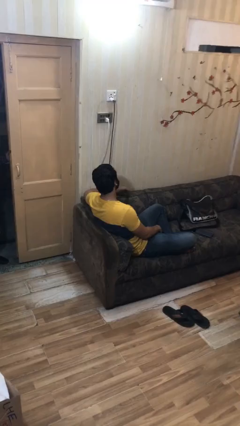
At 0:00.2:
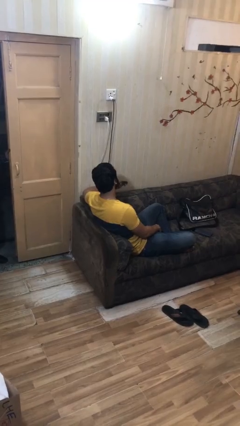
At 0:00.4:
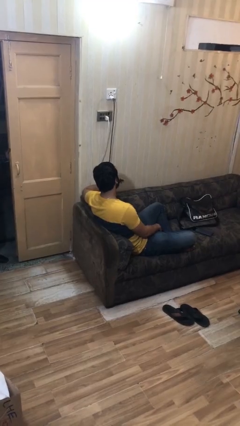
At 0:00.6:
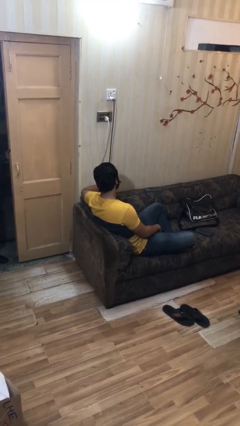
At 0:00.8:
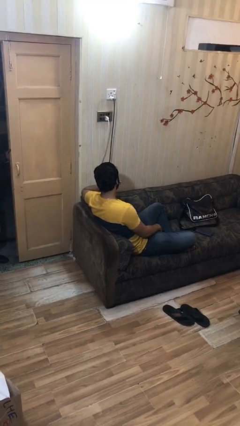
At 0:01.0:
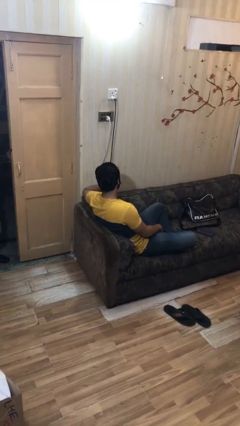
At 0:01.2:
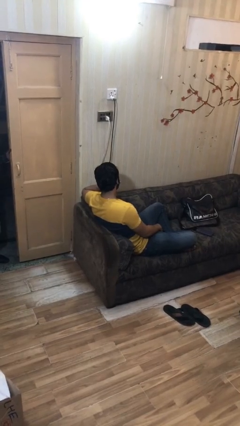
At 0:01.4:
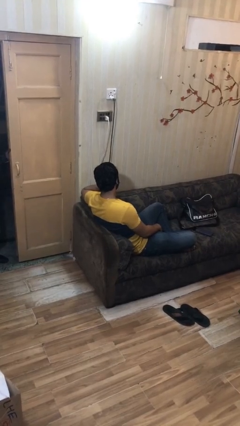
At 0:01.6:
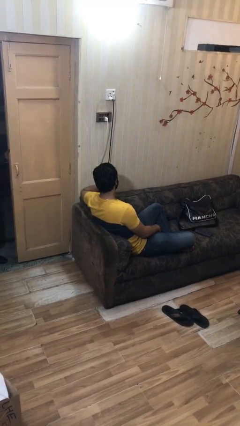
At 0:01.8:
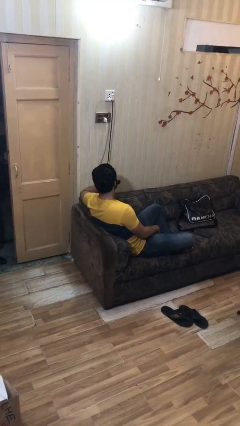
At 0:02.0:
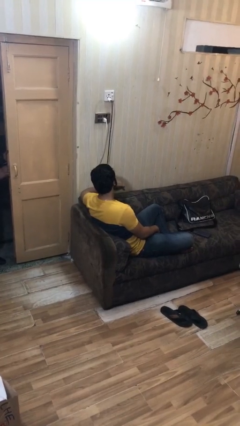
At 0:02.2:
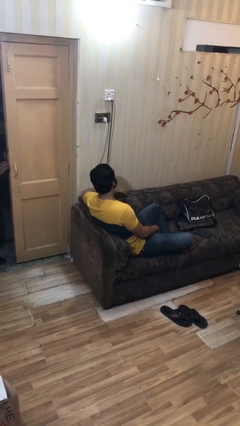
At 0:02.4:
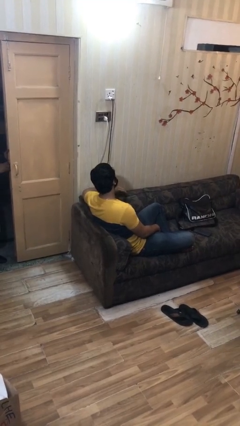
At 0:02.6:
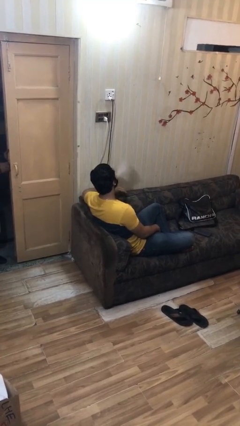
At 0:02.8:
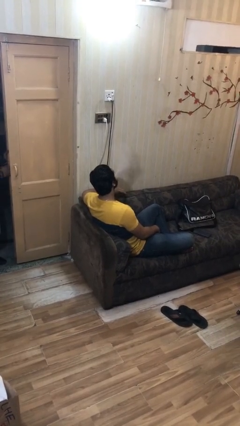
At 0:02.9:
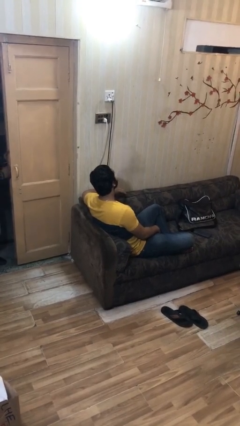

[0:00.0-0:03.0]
person vapes

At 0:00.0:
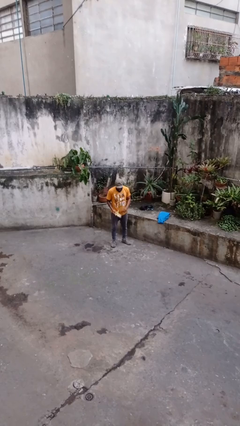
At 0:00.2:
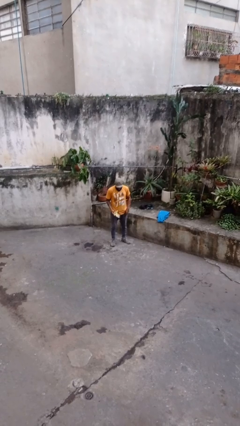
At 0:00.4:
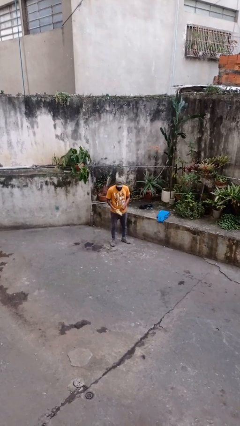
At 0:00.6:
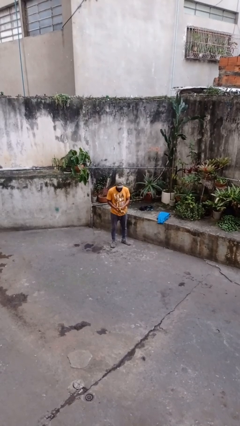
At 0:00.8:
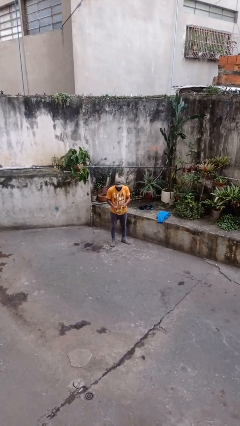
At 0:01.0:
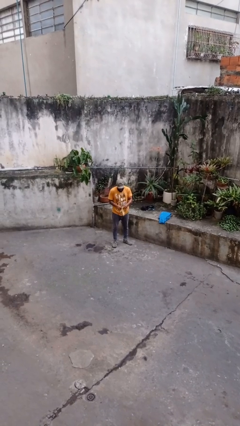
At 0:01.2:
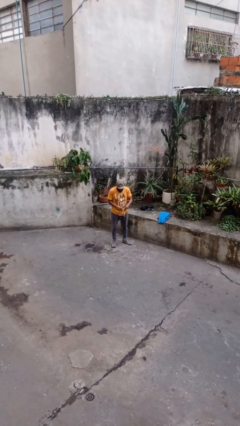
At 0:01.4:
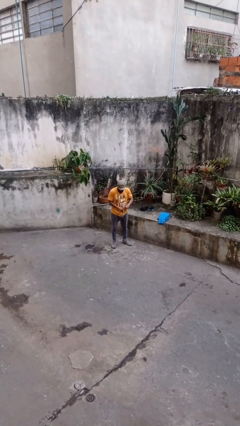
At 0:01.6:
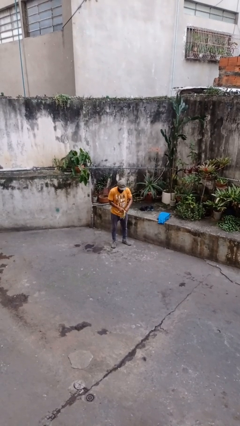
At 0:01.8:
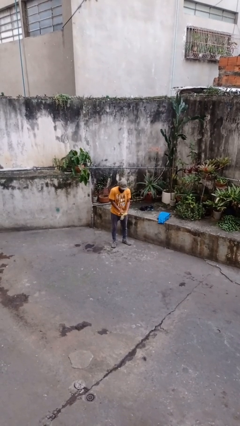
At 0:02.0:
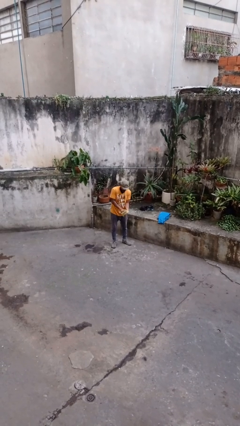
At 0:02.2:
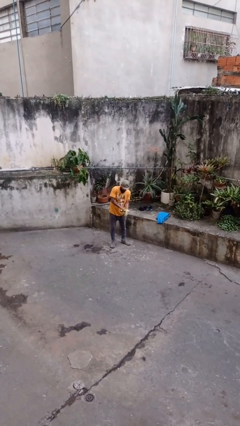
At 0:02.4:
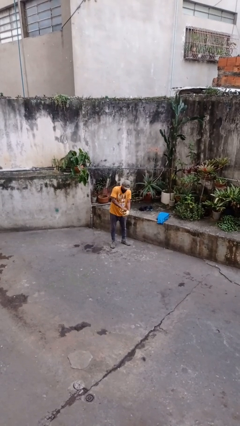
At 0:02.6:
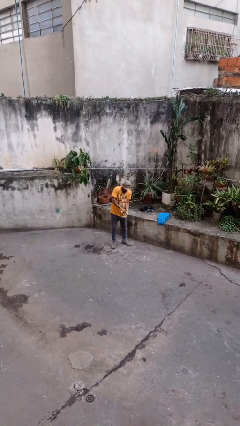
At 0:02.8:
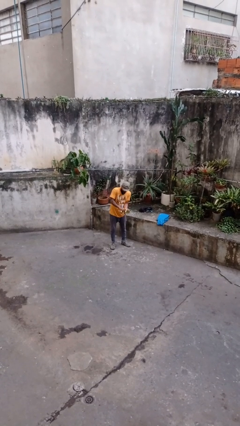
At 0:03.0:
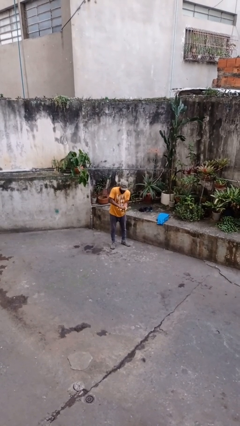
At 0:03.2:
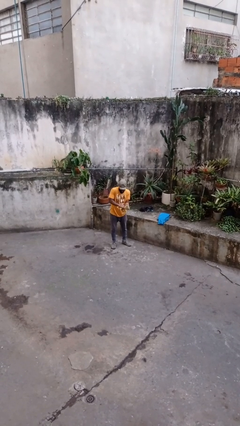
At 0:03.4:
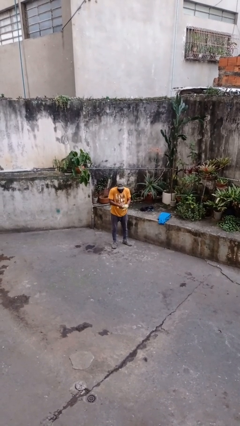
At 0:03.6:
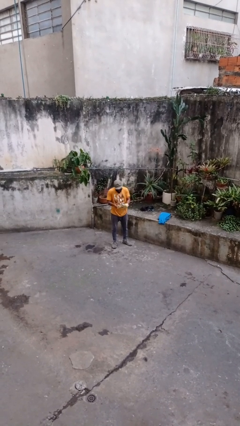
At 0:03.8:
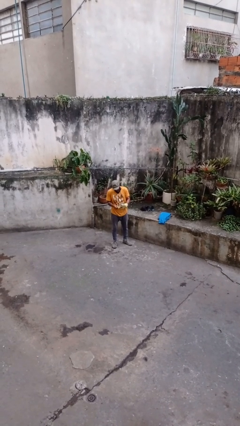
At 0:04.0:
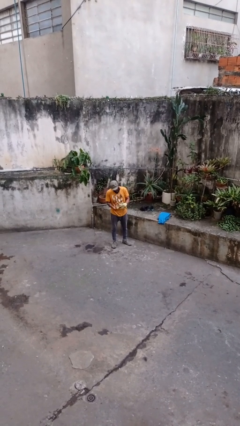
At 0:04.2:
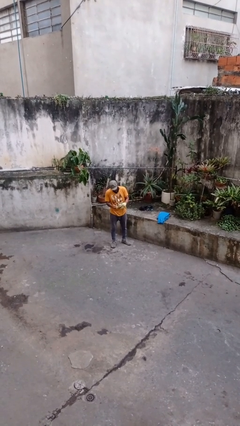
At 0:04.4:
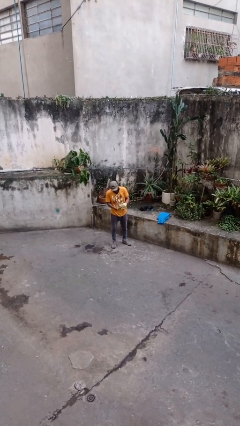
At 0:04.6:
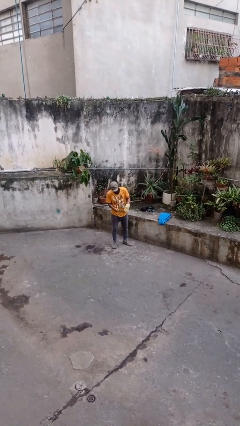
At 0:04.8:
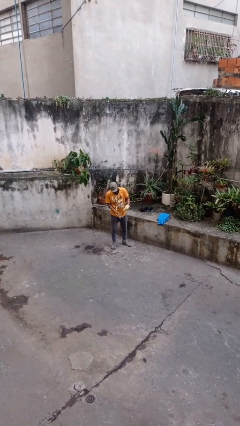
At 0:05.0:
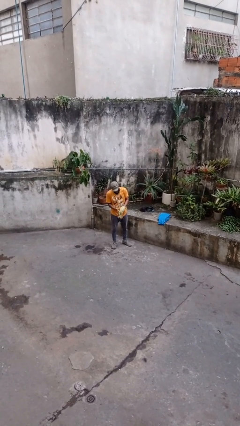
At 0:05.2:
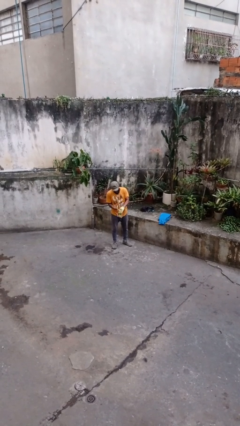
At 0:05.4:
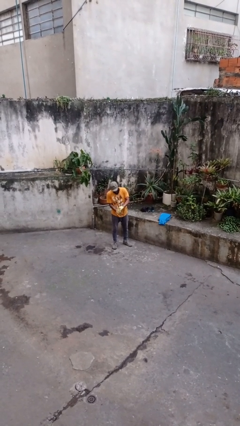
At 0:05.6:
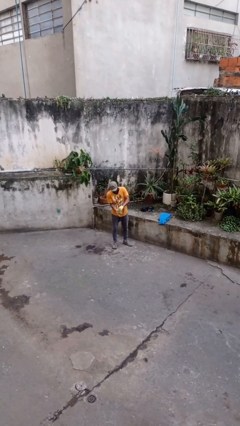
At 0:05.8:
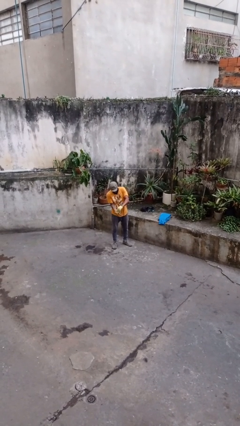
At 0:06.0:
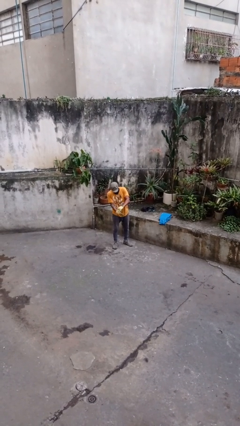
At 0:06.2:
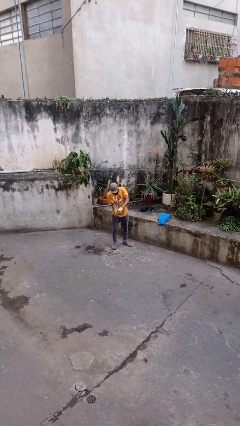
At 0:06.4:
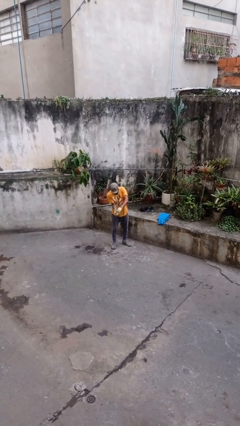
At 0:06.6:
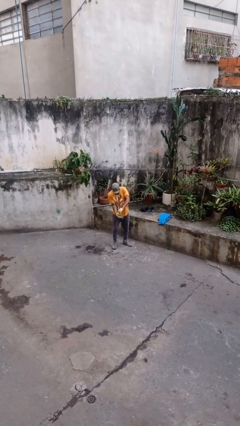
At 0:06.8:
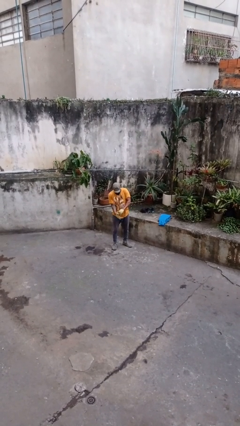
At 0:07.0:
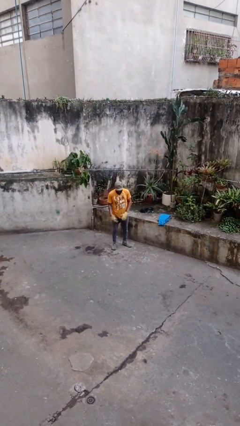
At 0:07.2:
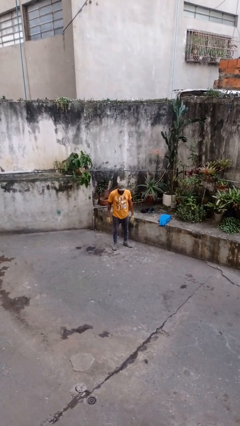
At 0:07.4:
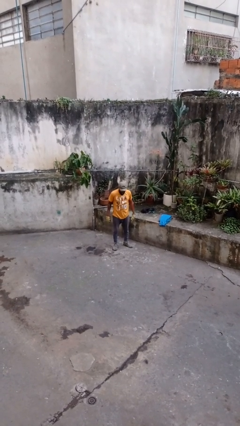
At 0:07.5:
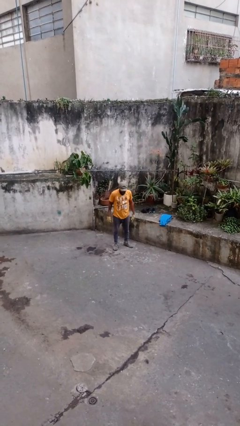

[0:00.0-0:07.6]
person puts on gloves

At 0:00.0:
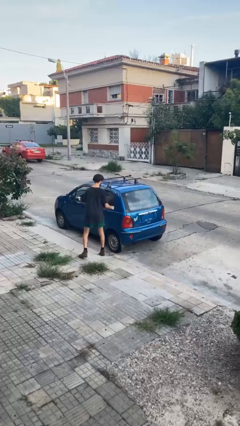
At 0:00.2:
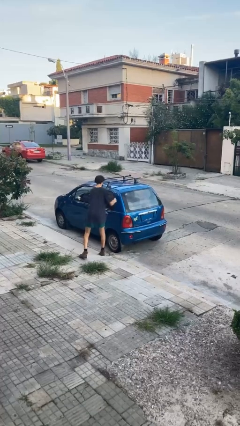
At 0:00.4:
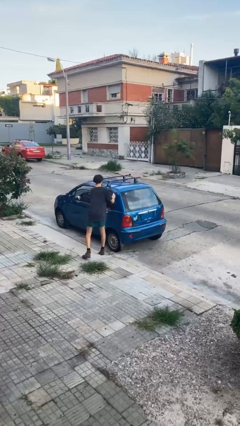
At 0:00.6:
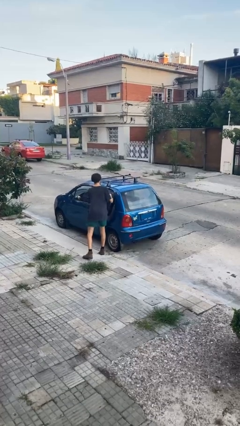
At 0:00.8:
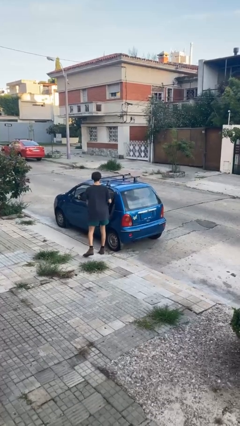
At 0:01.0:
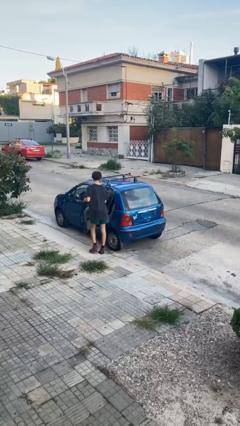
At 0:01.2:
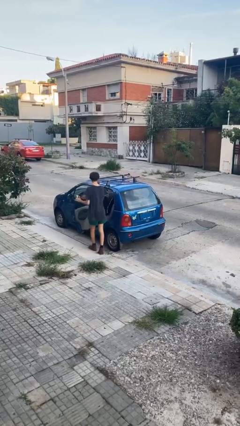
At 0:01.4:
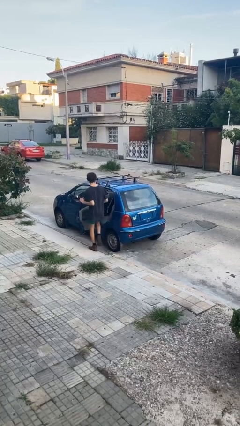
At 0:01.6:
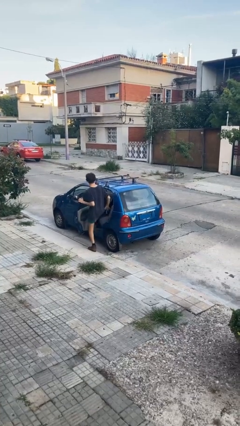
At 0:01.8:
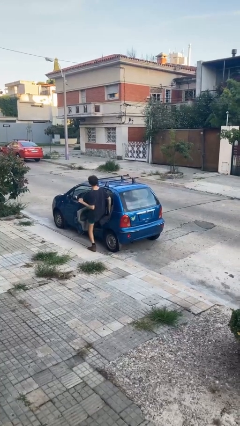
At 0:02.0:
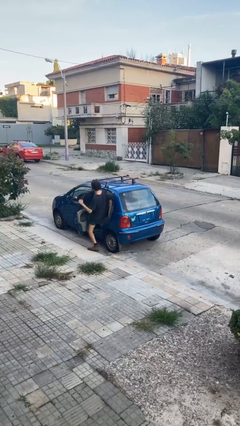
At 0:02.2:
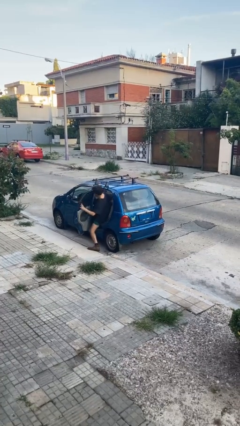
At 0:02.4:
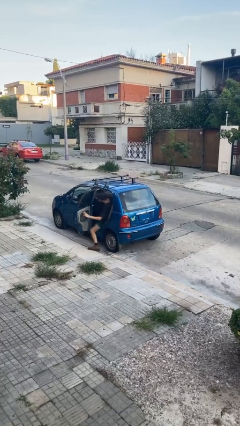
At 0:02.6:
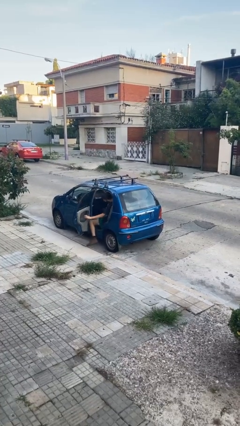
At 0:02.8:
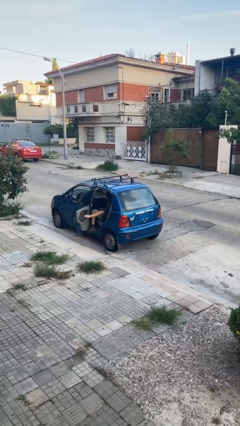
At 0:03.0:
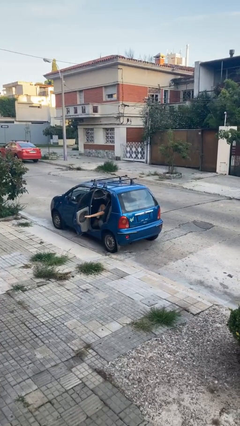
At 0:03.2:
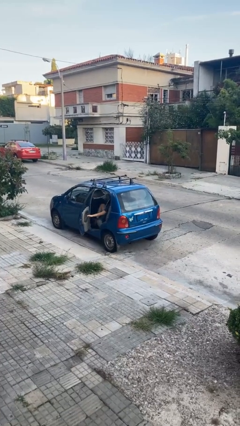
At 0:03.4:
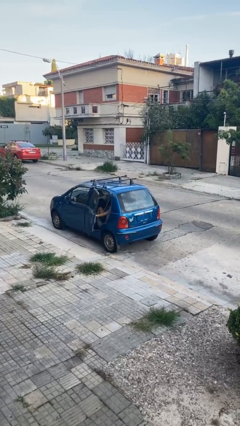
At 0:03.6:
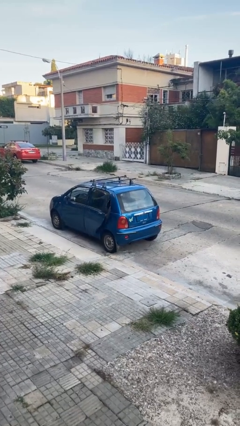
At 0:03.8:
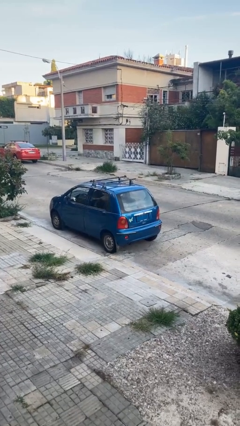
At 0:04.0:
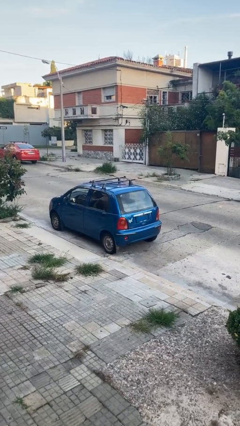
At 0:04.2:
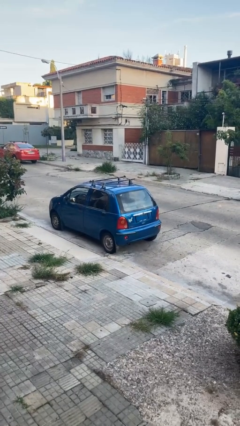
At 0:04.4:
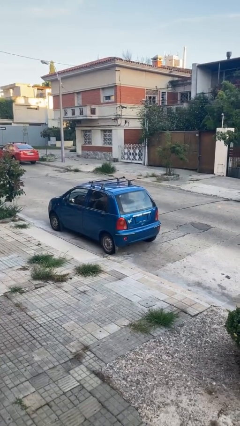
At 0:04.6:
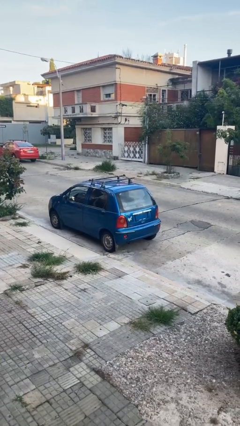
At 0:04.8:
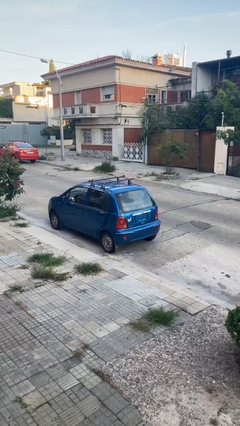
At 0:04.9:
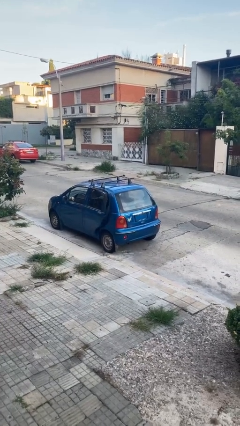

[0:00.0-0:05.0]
car picks up person

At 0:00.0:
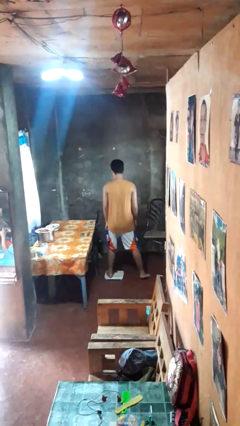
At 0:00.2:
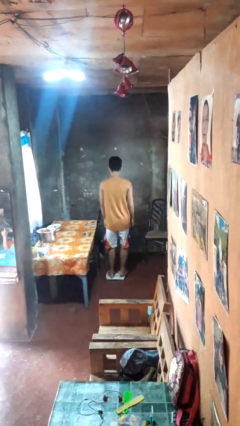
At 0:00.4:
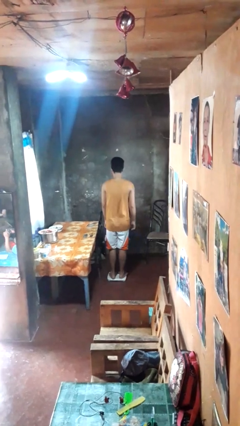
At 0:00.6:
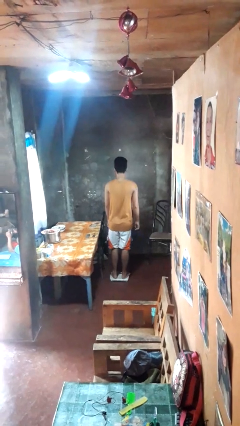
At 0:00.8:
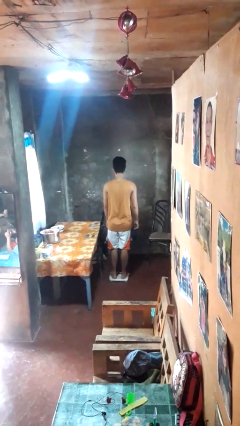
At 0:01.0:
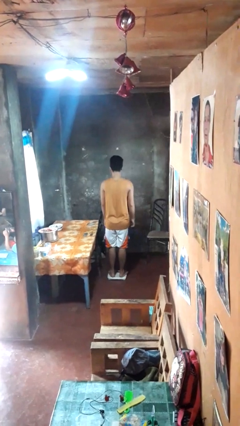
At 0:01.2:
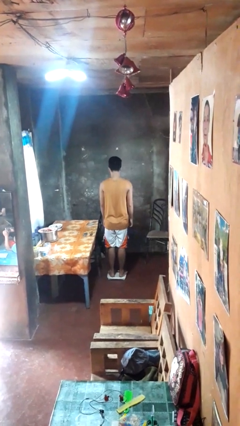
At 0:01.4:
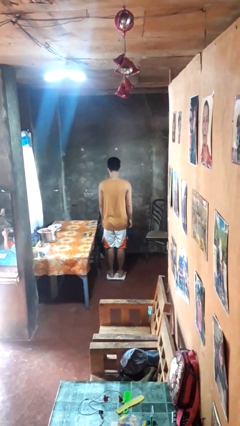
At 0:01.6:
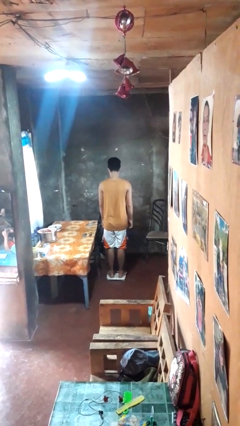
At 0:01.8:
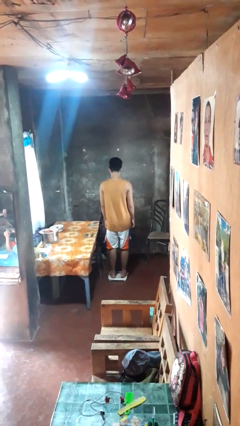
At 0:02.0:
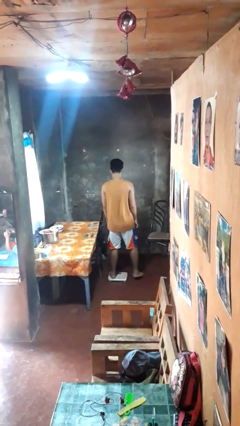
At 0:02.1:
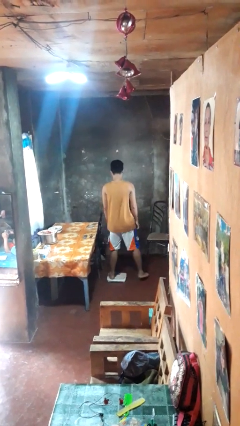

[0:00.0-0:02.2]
person uses bodyweight scale
